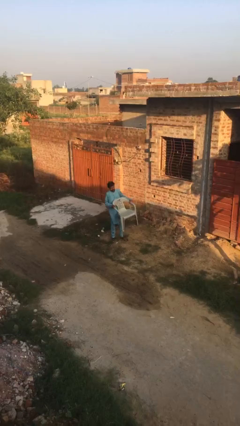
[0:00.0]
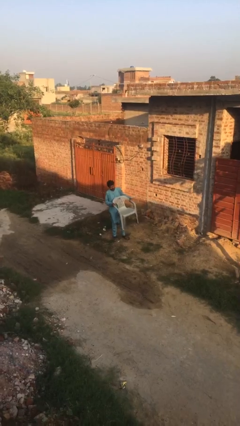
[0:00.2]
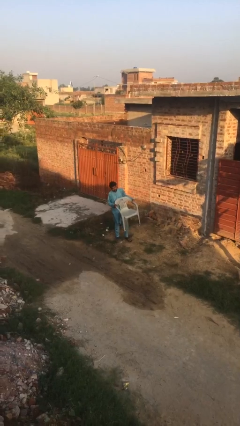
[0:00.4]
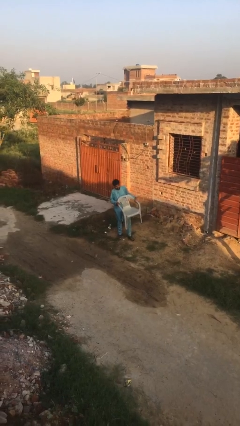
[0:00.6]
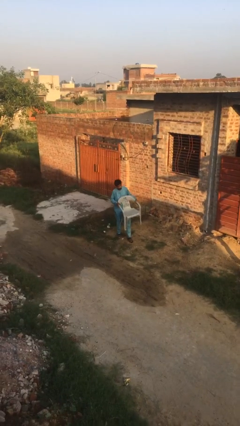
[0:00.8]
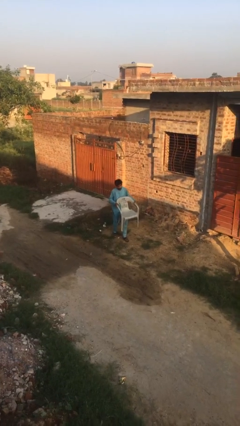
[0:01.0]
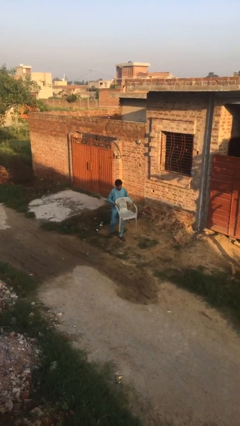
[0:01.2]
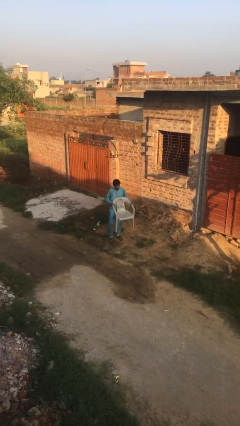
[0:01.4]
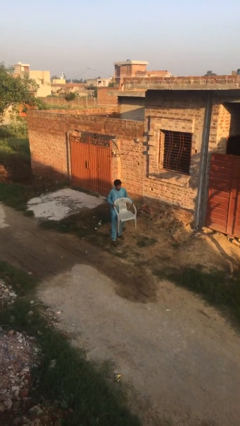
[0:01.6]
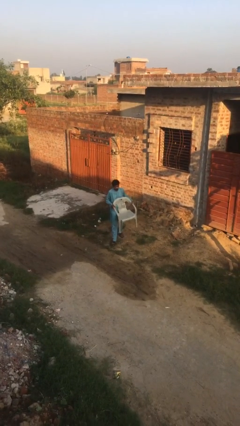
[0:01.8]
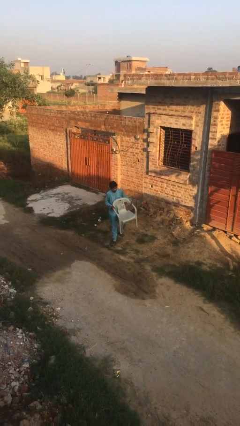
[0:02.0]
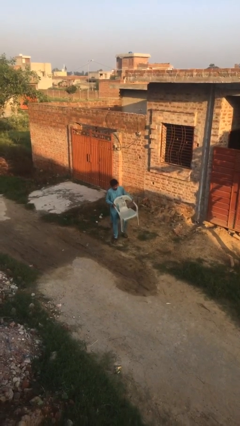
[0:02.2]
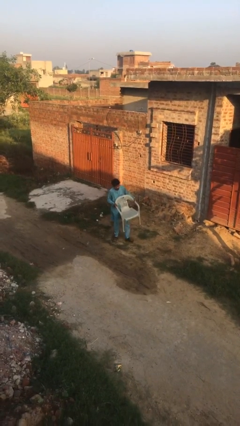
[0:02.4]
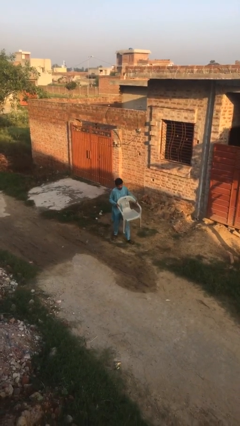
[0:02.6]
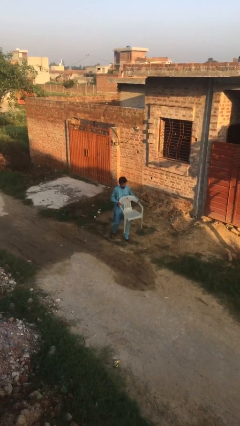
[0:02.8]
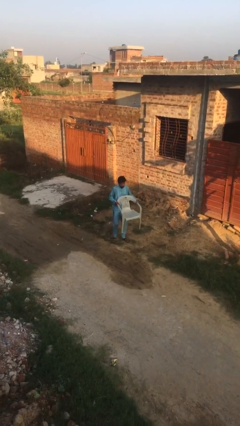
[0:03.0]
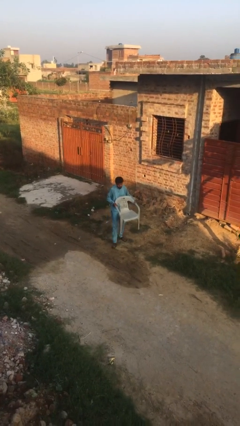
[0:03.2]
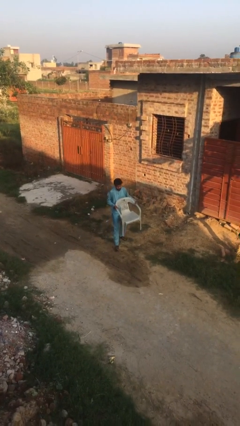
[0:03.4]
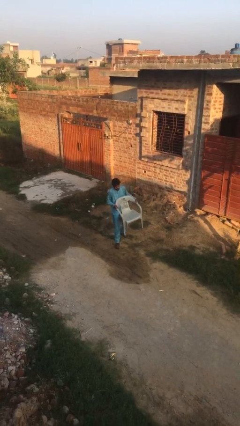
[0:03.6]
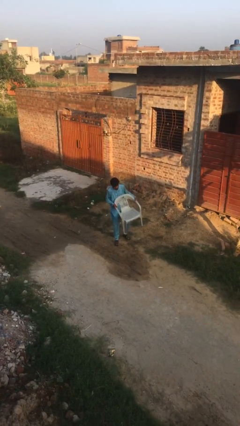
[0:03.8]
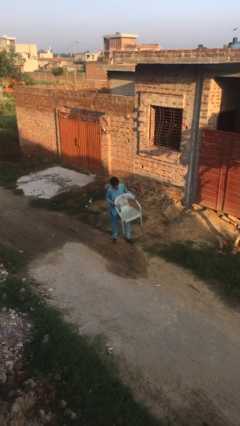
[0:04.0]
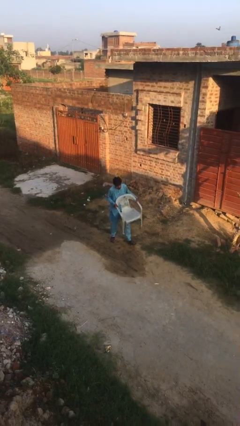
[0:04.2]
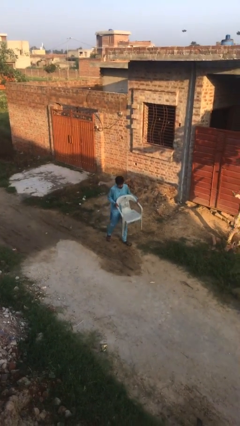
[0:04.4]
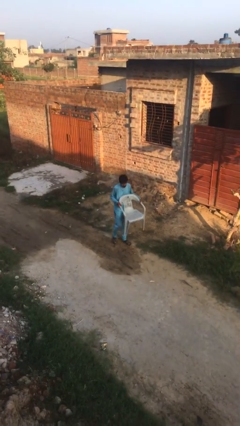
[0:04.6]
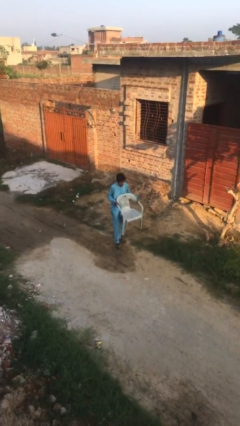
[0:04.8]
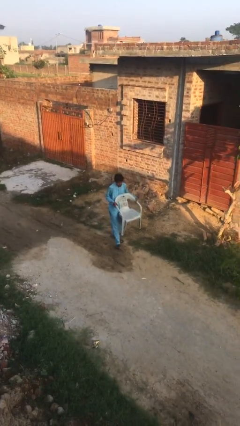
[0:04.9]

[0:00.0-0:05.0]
person carries heavy object

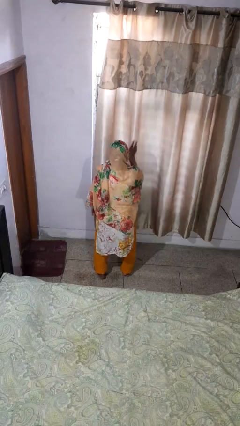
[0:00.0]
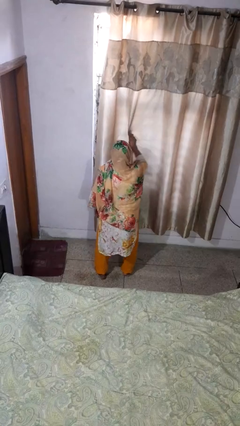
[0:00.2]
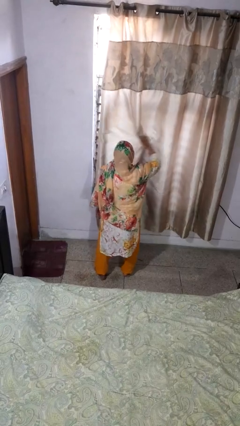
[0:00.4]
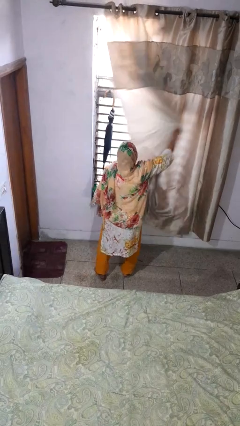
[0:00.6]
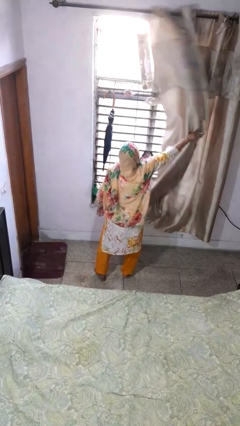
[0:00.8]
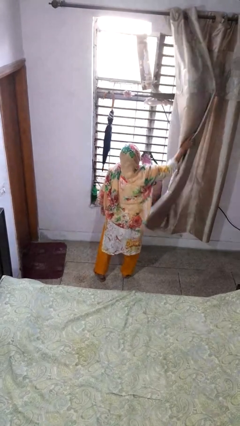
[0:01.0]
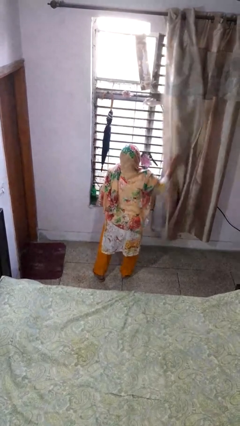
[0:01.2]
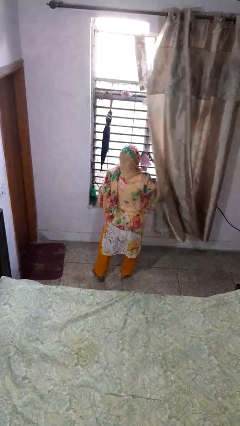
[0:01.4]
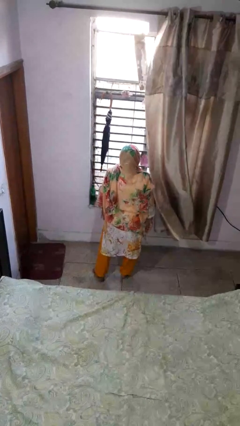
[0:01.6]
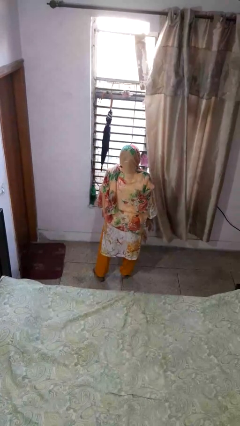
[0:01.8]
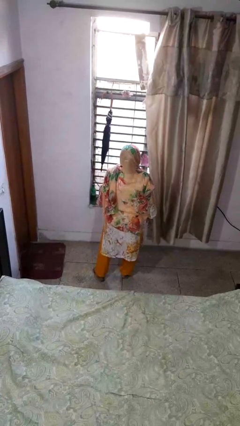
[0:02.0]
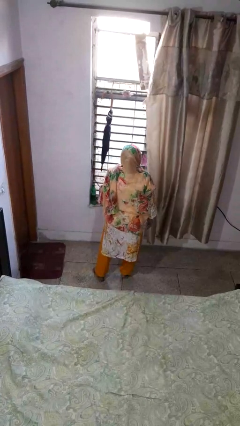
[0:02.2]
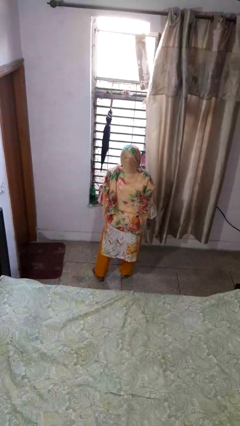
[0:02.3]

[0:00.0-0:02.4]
person opens curtains

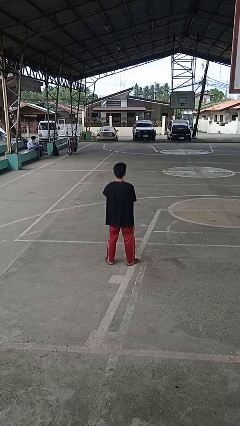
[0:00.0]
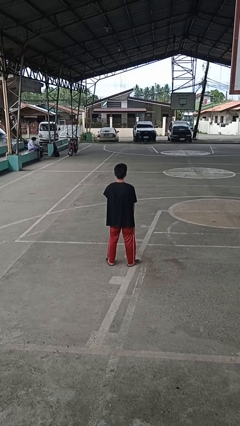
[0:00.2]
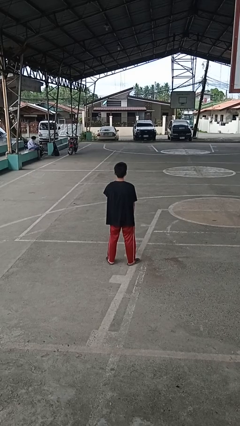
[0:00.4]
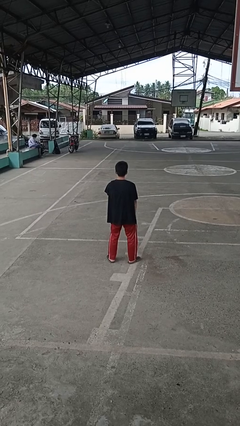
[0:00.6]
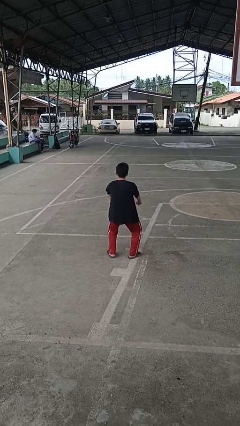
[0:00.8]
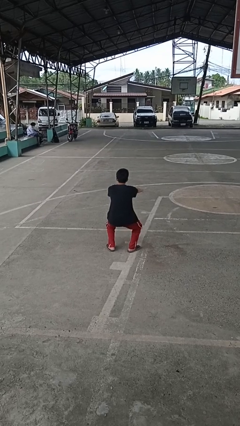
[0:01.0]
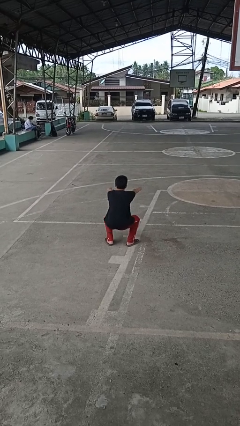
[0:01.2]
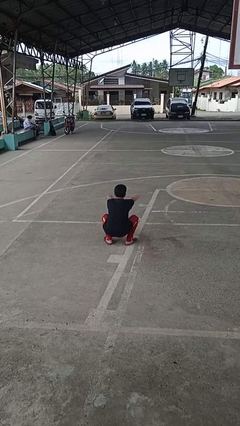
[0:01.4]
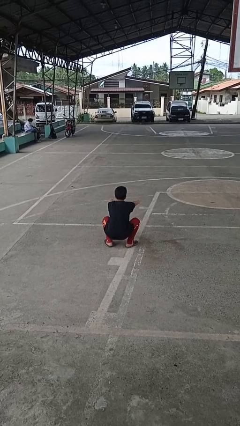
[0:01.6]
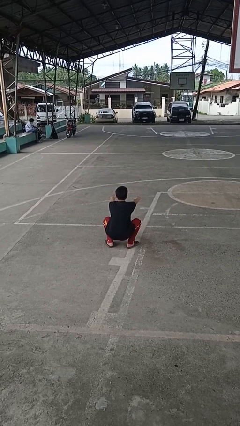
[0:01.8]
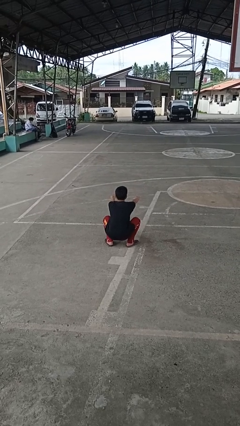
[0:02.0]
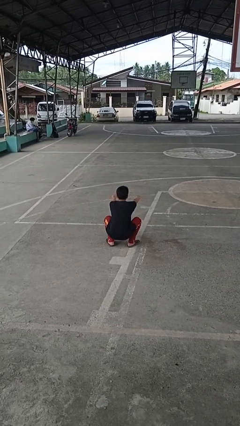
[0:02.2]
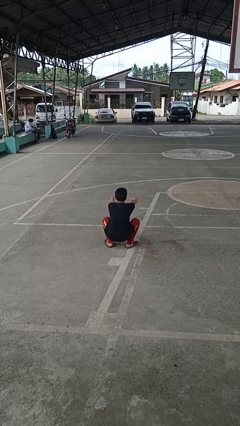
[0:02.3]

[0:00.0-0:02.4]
person squats

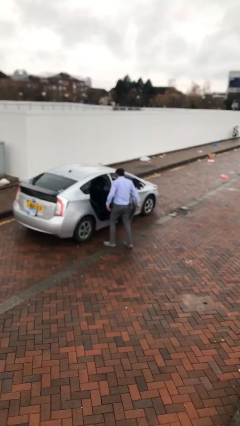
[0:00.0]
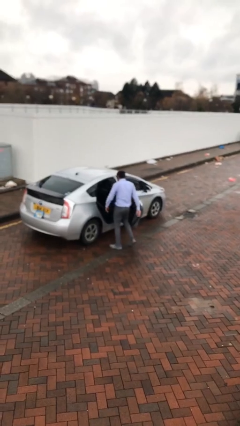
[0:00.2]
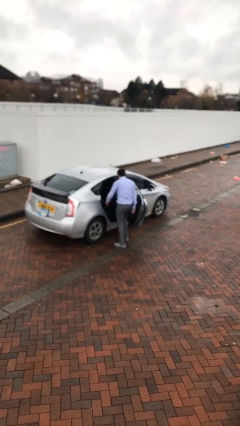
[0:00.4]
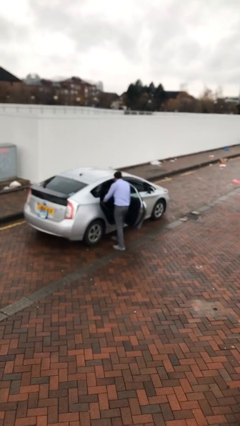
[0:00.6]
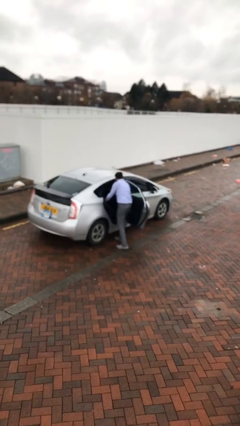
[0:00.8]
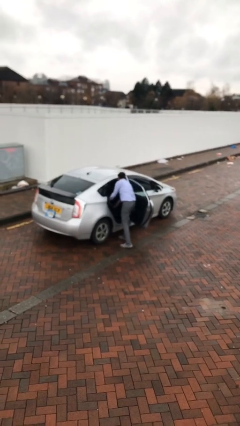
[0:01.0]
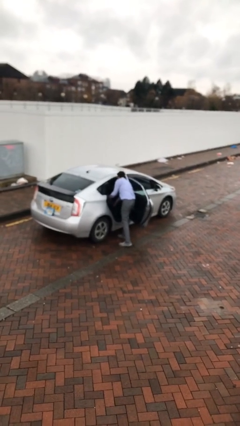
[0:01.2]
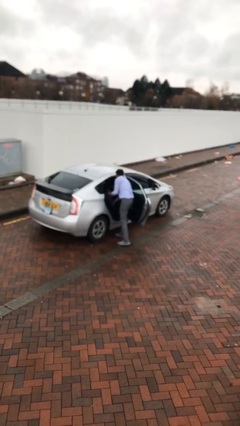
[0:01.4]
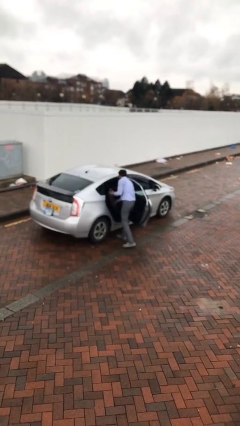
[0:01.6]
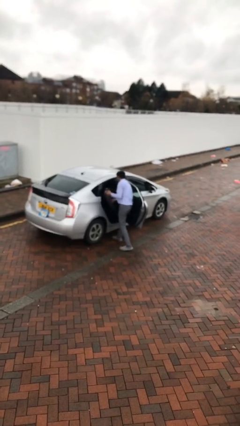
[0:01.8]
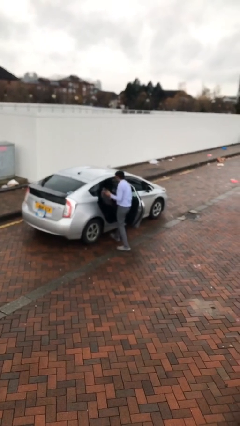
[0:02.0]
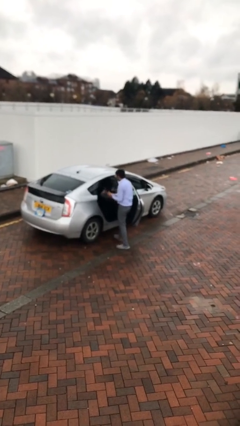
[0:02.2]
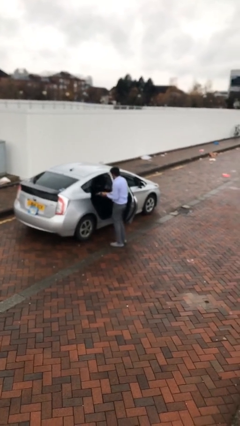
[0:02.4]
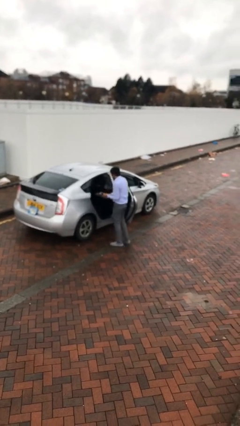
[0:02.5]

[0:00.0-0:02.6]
person unloads car

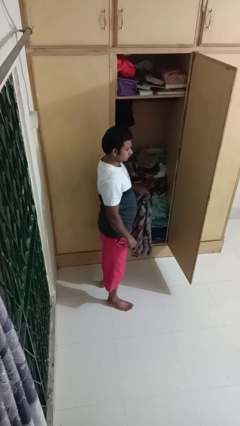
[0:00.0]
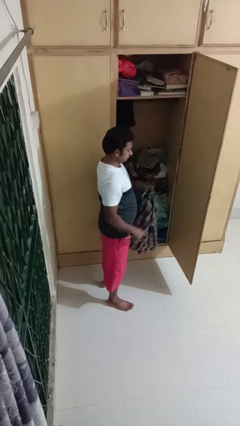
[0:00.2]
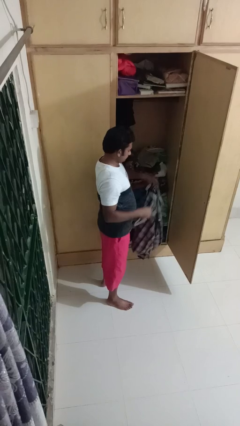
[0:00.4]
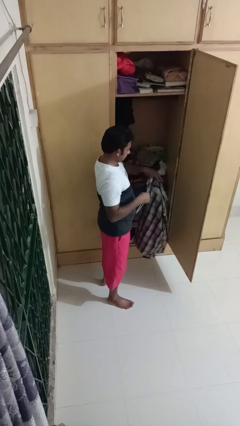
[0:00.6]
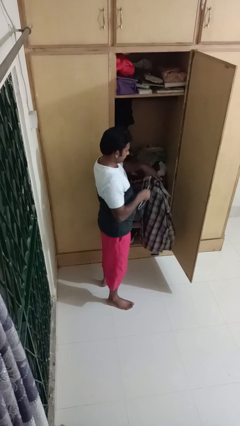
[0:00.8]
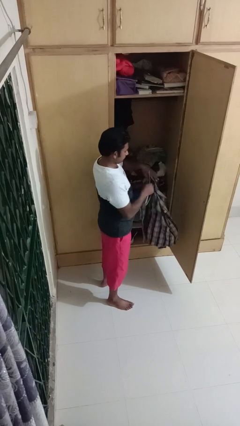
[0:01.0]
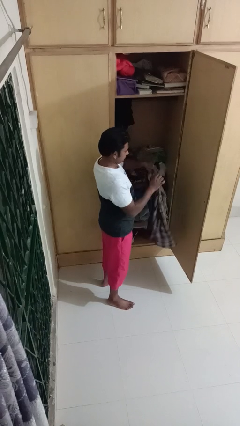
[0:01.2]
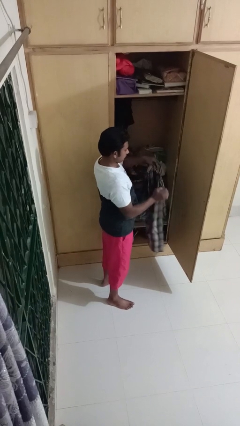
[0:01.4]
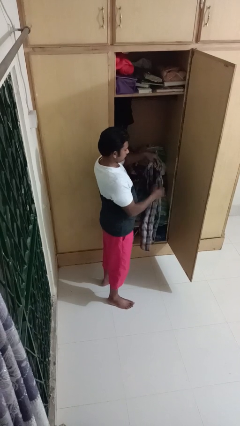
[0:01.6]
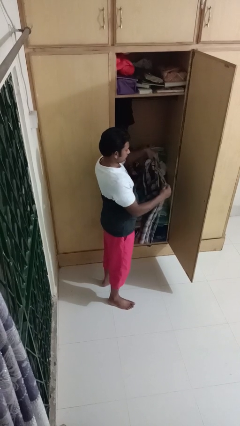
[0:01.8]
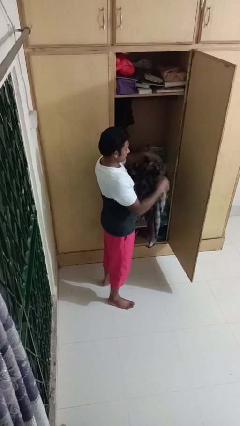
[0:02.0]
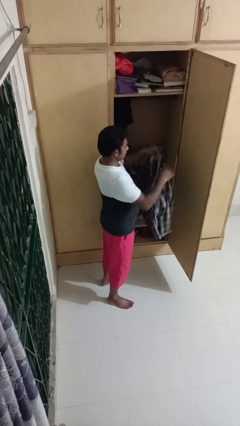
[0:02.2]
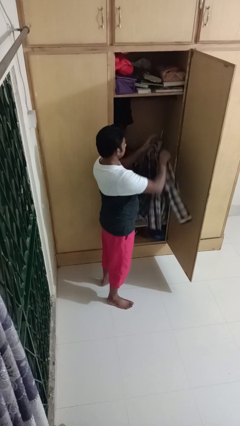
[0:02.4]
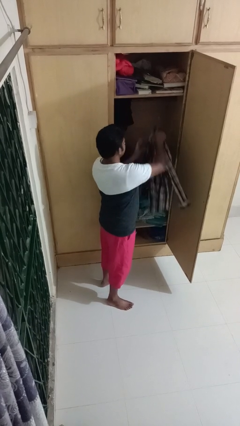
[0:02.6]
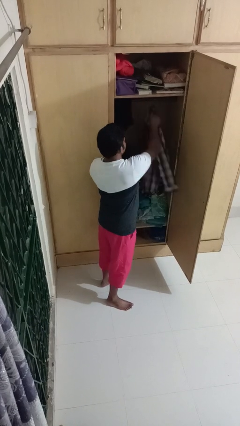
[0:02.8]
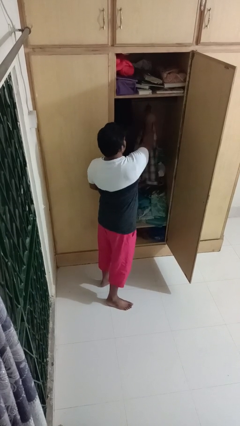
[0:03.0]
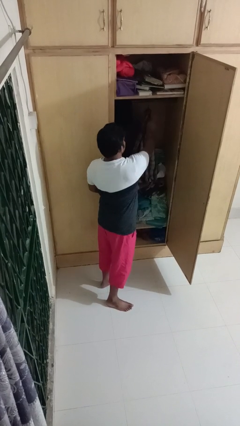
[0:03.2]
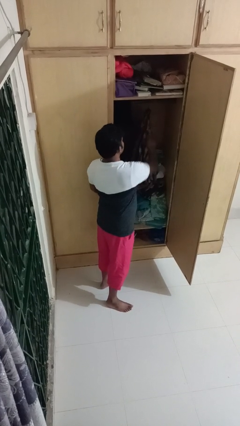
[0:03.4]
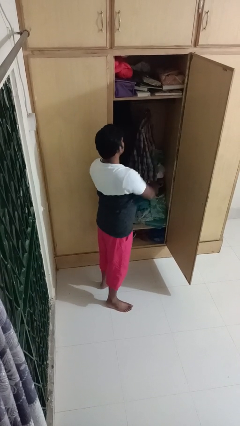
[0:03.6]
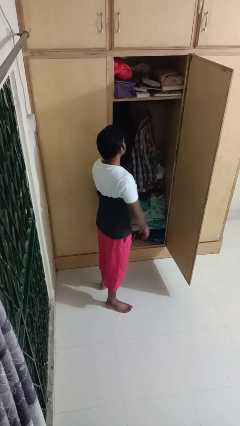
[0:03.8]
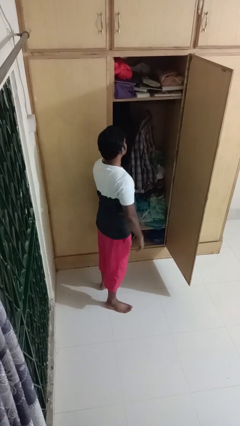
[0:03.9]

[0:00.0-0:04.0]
person puts clothes into closet

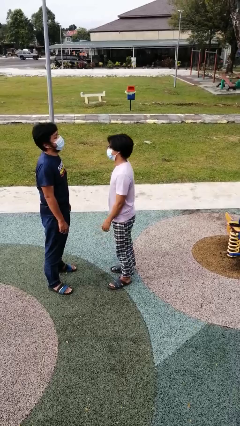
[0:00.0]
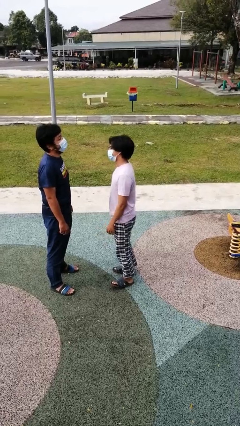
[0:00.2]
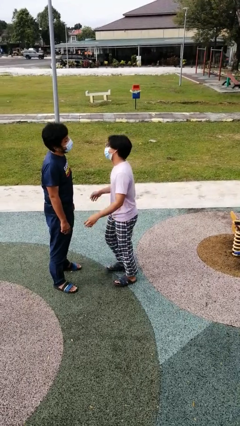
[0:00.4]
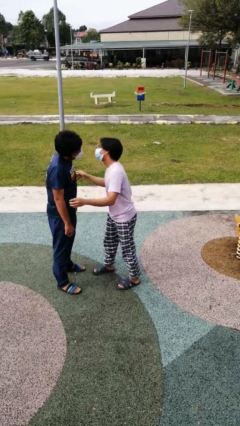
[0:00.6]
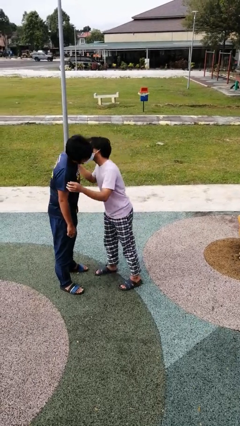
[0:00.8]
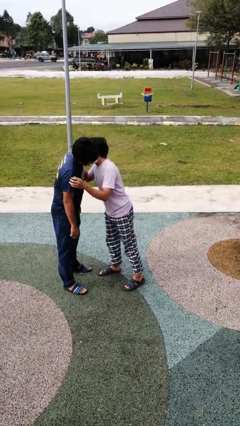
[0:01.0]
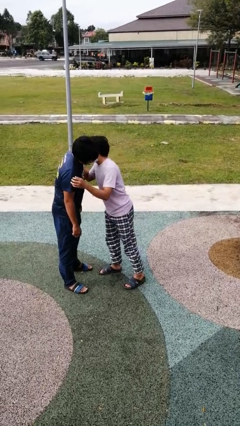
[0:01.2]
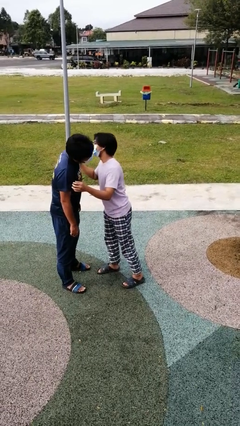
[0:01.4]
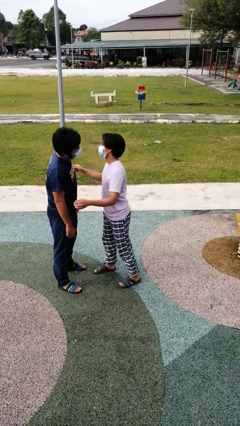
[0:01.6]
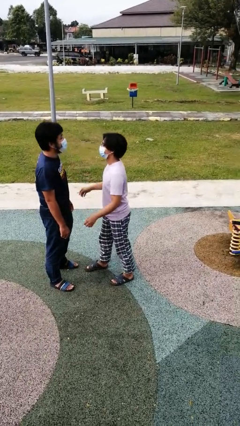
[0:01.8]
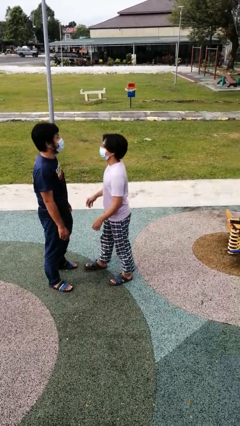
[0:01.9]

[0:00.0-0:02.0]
person kisses cheek of person
